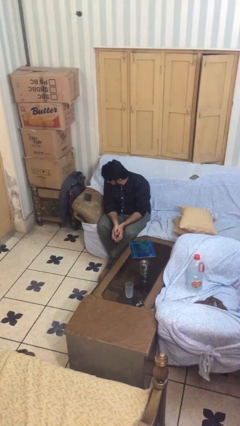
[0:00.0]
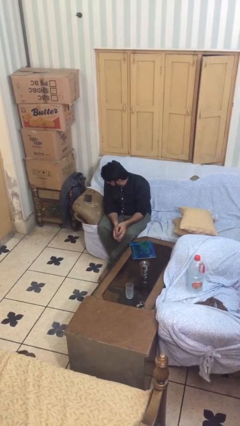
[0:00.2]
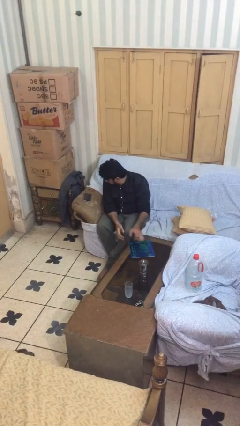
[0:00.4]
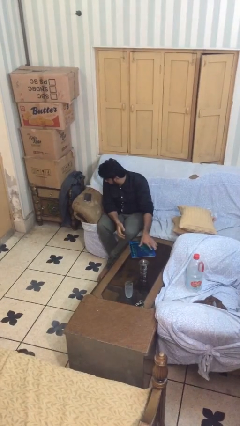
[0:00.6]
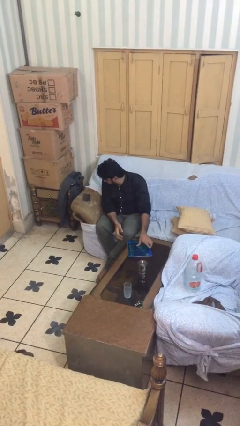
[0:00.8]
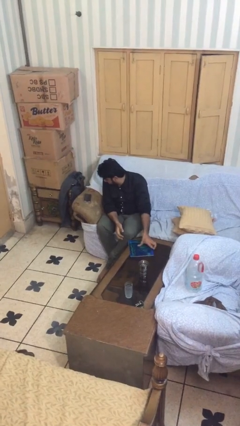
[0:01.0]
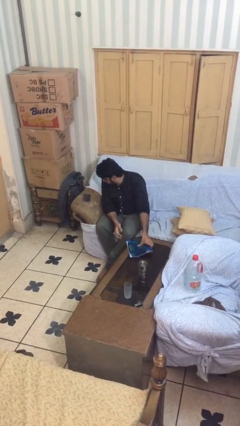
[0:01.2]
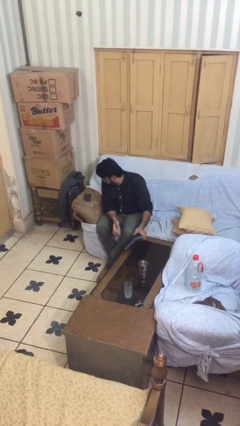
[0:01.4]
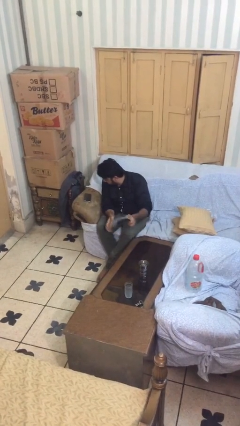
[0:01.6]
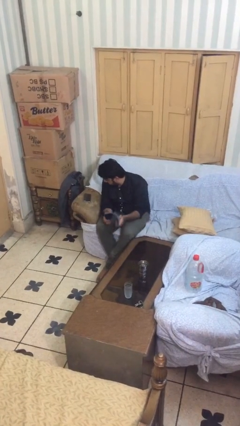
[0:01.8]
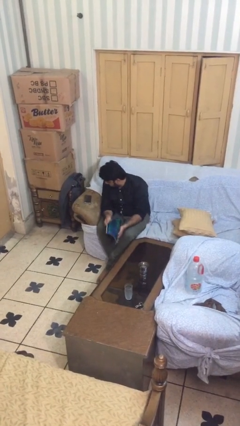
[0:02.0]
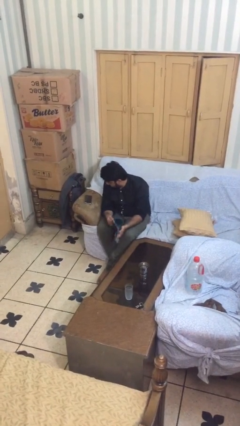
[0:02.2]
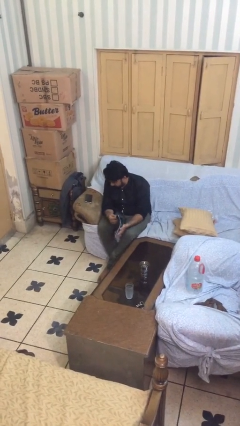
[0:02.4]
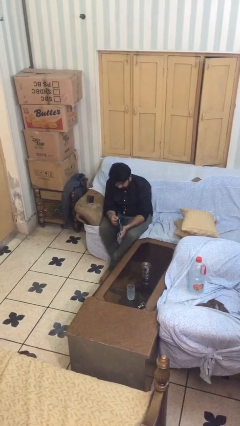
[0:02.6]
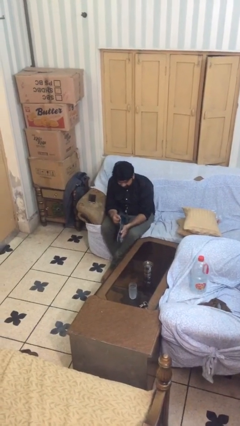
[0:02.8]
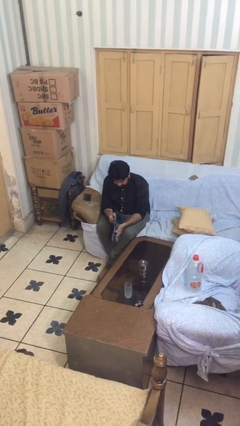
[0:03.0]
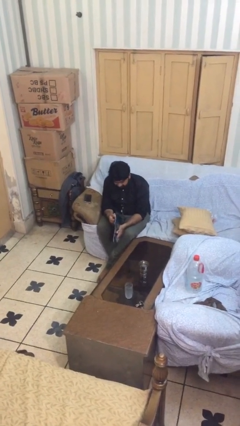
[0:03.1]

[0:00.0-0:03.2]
person picks up object from table

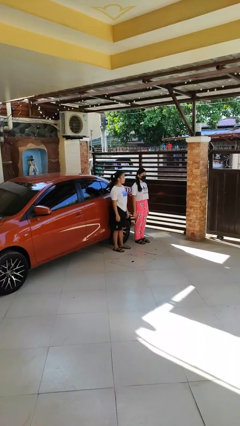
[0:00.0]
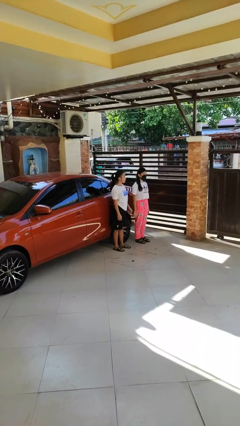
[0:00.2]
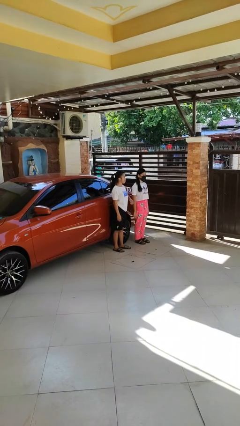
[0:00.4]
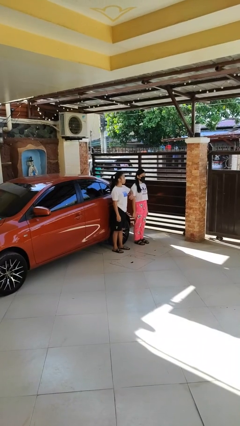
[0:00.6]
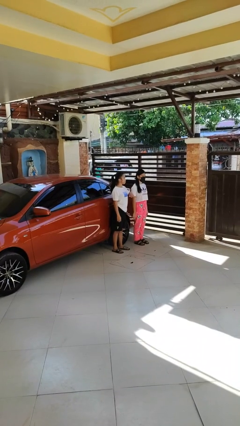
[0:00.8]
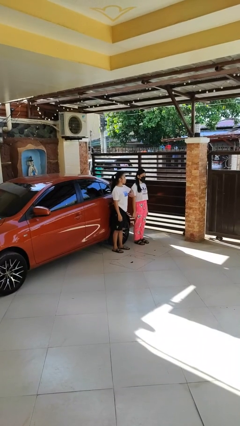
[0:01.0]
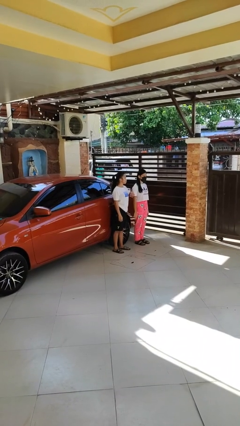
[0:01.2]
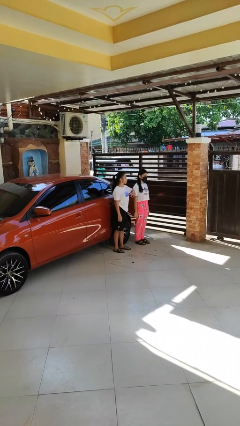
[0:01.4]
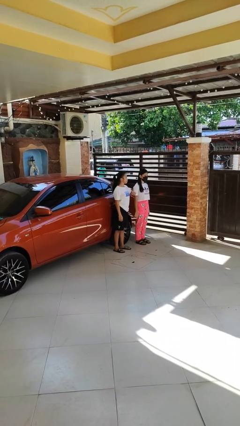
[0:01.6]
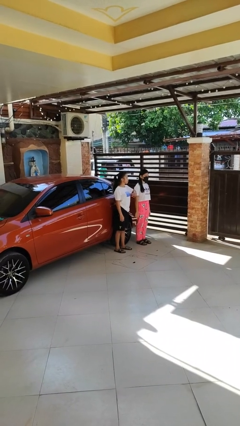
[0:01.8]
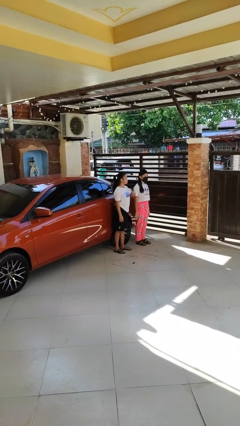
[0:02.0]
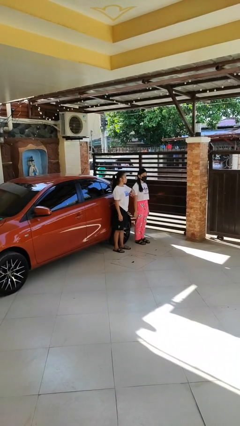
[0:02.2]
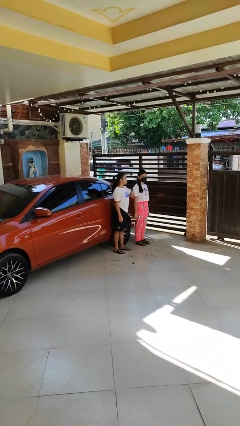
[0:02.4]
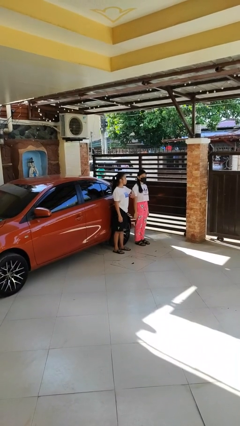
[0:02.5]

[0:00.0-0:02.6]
person nudges person with elbow

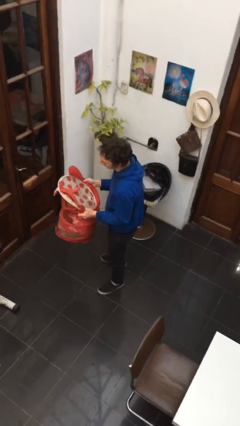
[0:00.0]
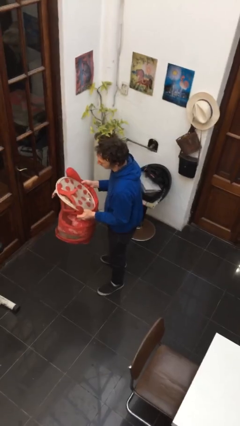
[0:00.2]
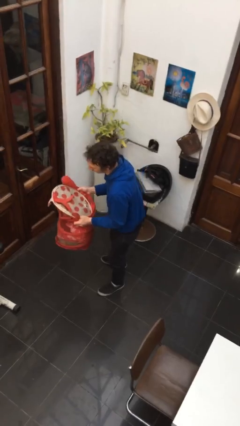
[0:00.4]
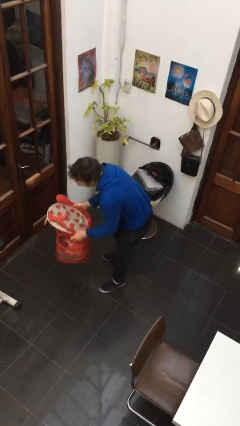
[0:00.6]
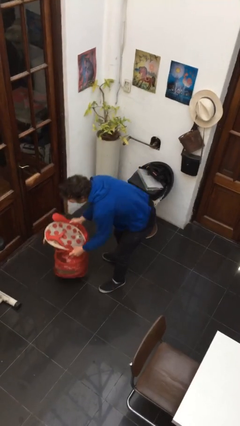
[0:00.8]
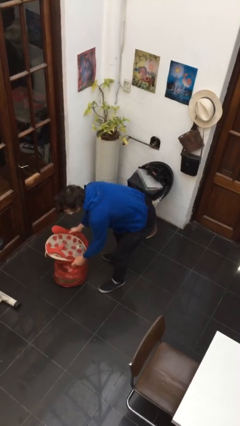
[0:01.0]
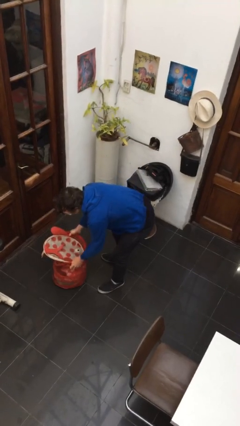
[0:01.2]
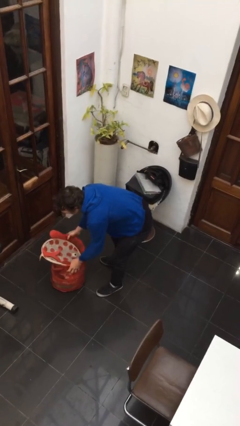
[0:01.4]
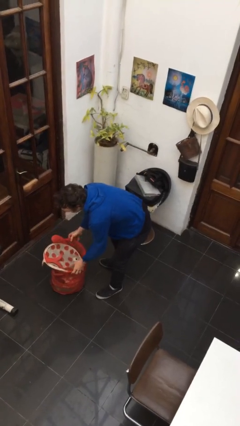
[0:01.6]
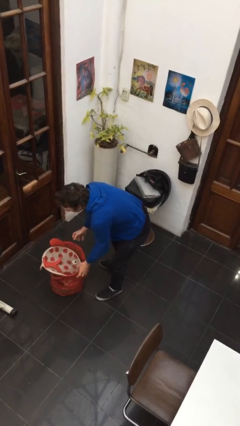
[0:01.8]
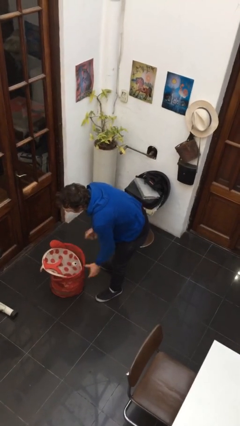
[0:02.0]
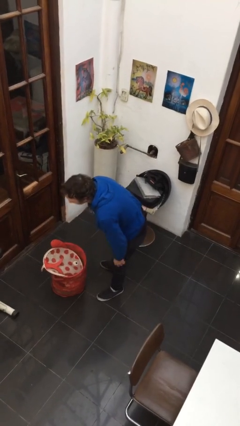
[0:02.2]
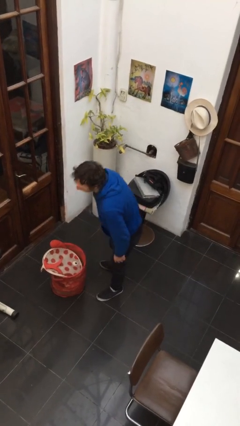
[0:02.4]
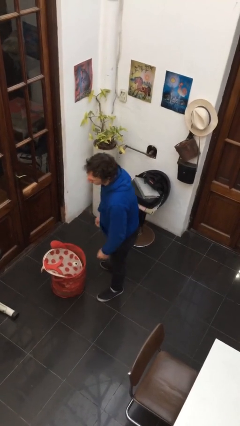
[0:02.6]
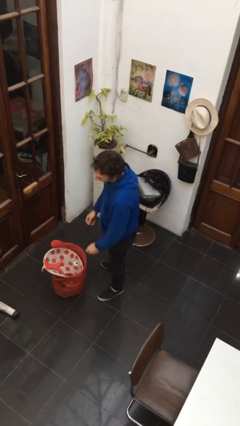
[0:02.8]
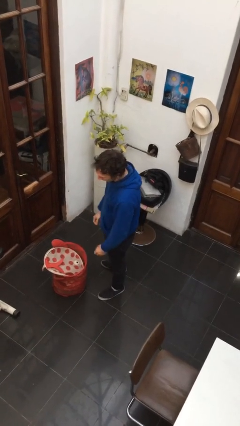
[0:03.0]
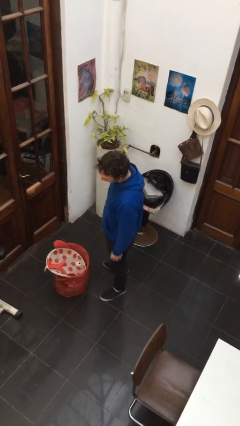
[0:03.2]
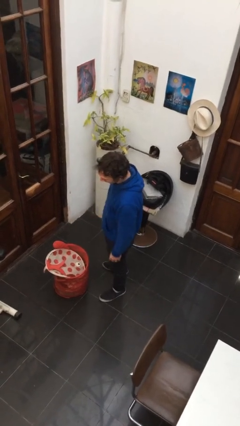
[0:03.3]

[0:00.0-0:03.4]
person puts down object on floor

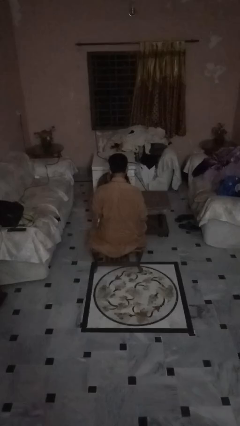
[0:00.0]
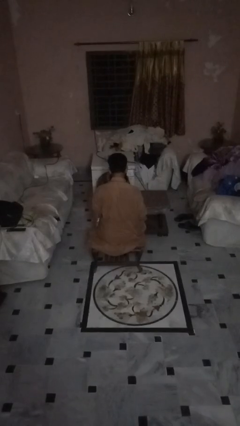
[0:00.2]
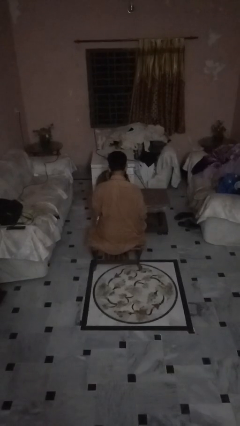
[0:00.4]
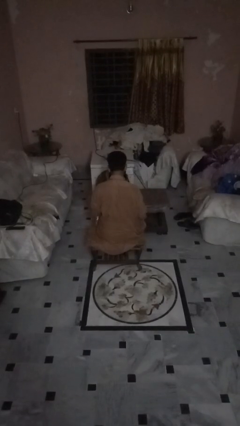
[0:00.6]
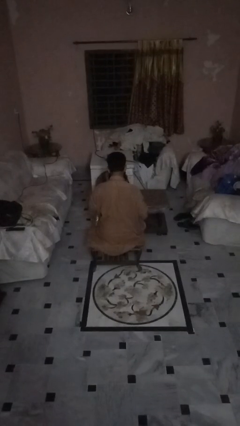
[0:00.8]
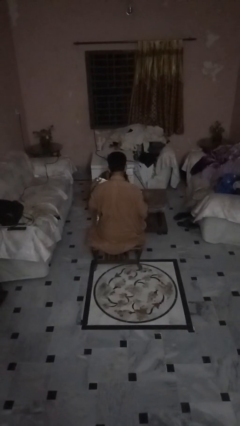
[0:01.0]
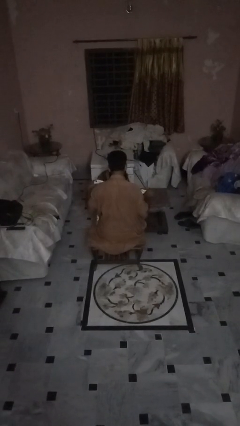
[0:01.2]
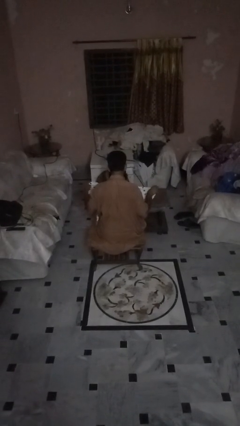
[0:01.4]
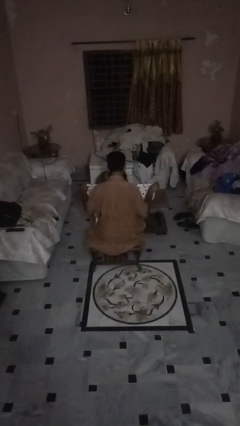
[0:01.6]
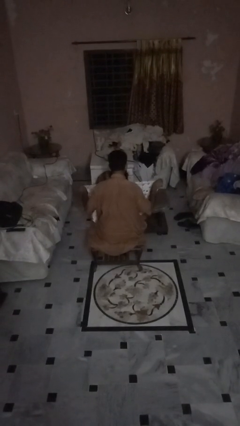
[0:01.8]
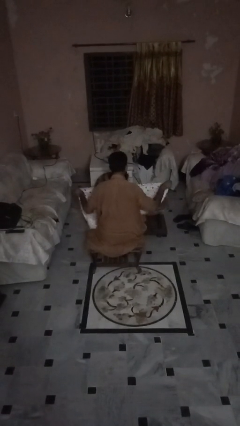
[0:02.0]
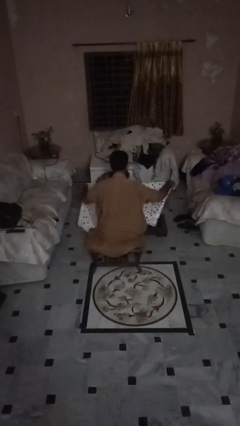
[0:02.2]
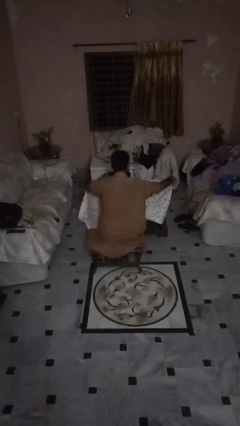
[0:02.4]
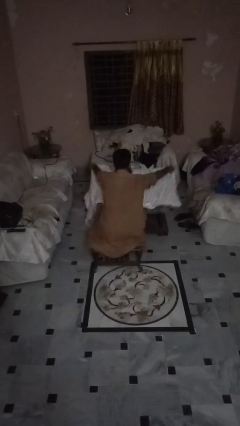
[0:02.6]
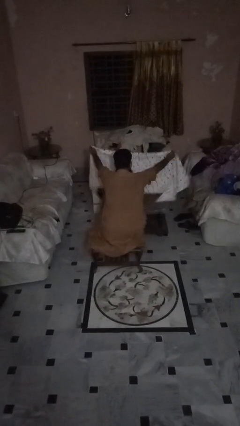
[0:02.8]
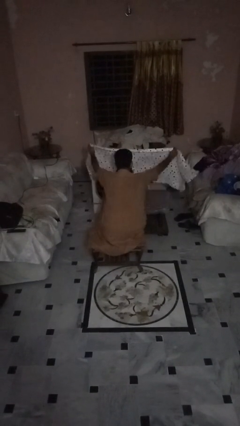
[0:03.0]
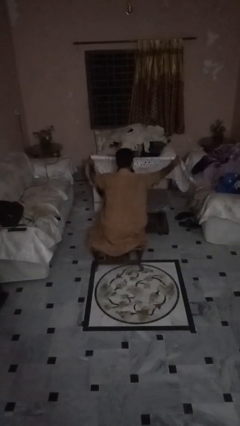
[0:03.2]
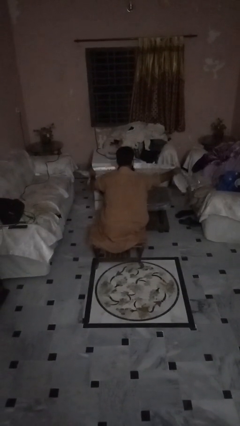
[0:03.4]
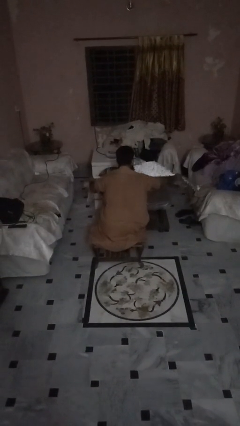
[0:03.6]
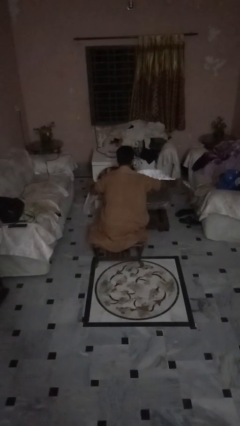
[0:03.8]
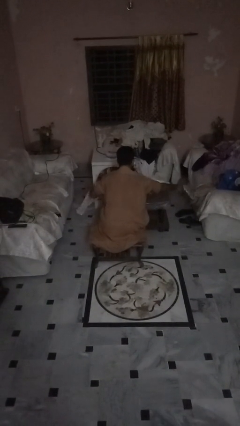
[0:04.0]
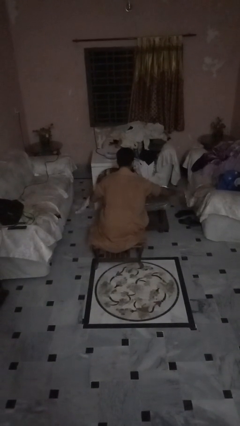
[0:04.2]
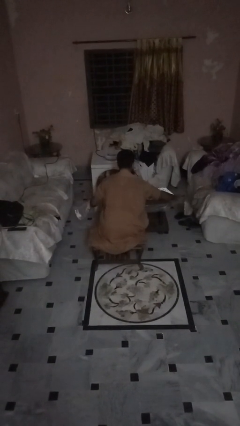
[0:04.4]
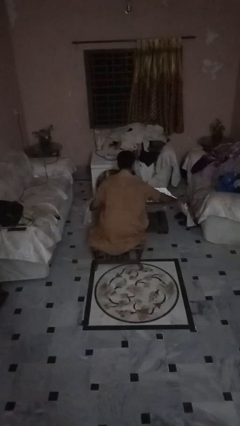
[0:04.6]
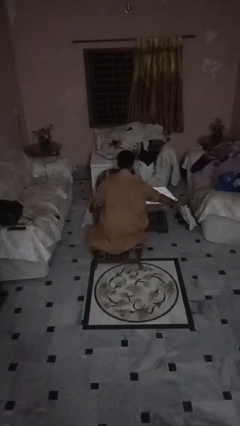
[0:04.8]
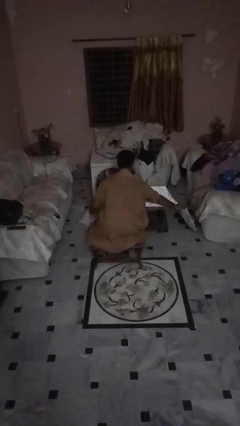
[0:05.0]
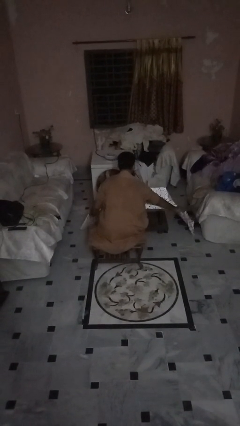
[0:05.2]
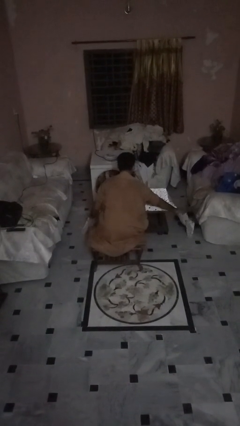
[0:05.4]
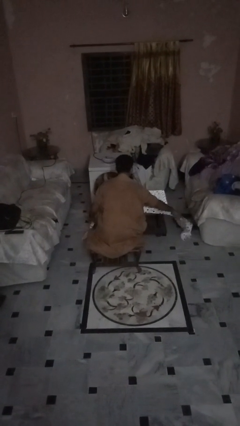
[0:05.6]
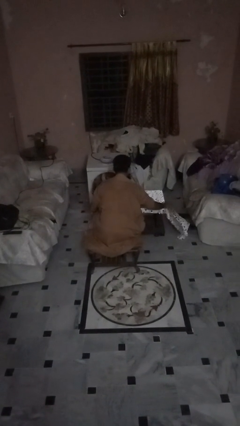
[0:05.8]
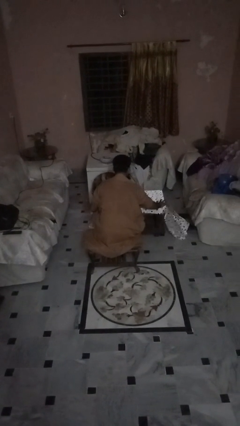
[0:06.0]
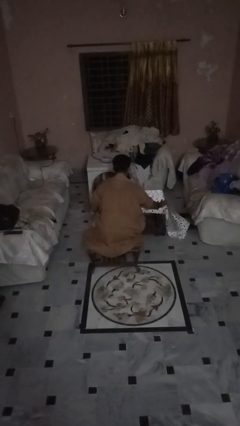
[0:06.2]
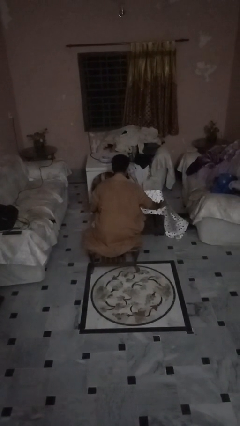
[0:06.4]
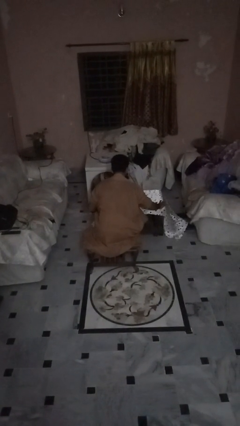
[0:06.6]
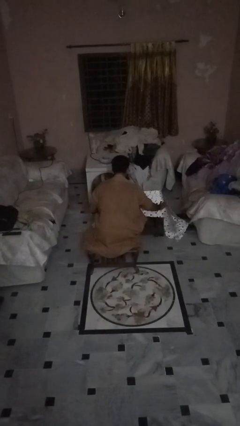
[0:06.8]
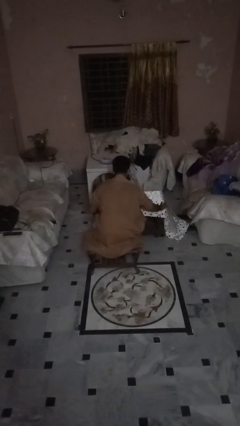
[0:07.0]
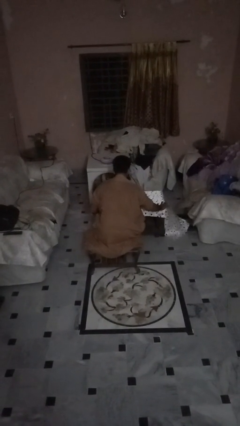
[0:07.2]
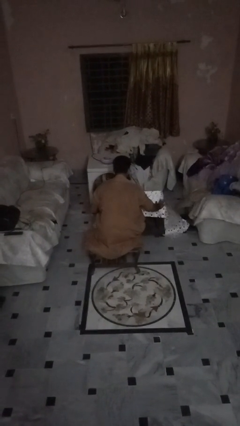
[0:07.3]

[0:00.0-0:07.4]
person spreads tablecloth

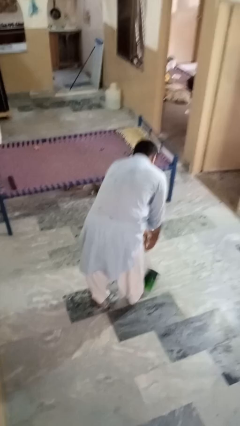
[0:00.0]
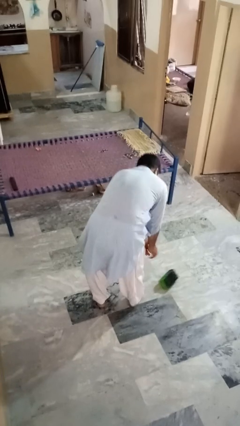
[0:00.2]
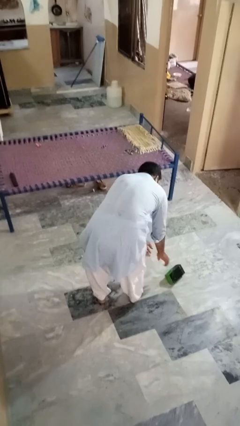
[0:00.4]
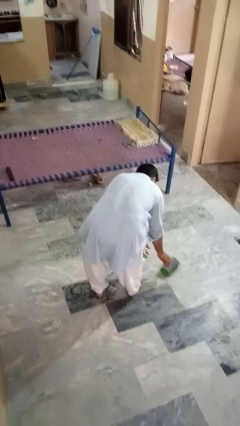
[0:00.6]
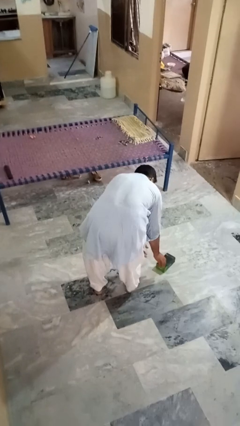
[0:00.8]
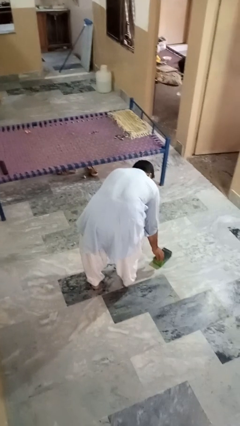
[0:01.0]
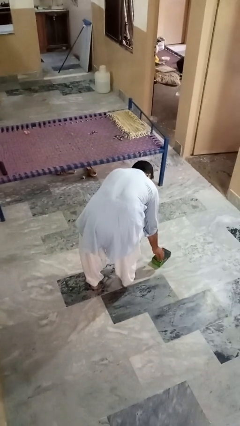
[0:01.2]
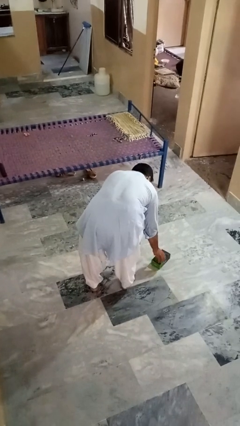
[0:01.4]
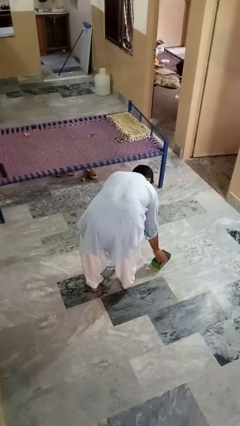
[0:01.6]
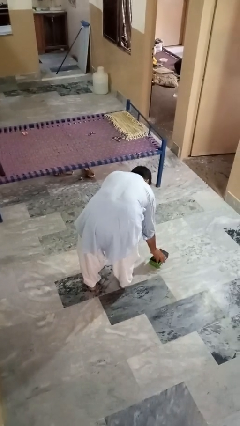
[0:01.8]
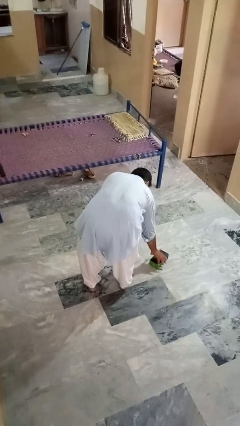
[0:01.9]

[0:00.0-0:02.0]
person catches dropped object
